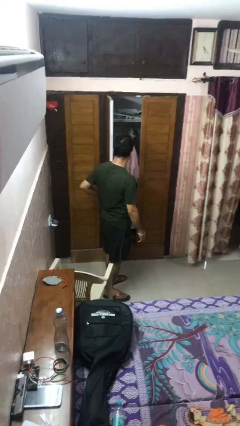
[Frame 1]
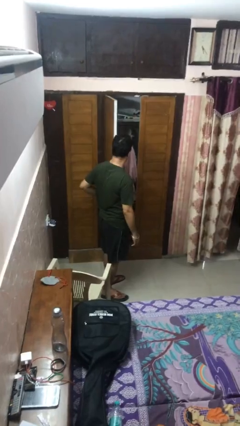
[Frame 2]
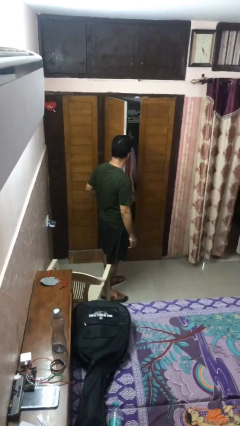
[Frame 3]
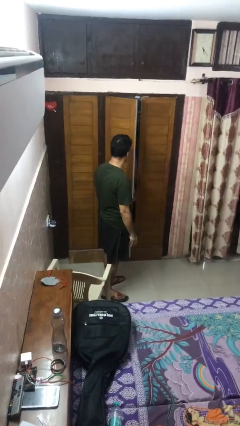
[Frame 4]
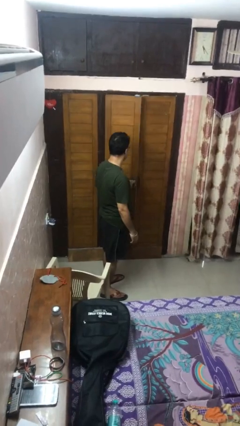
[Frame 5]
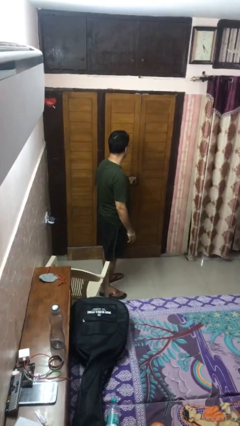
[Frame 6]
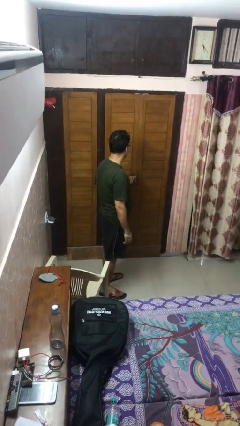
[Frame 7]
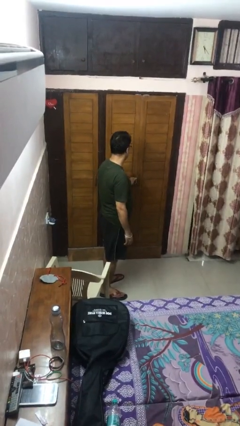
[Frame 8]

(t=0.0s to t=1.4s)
person closes closet door

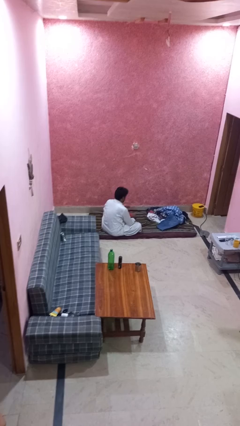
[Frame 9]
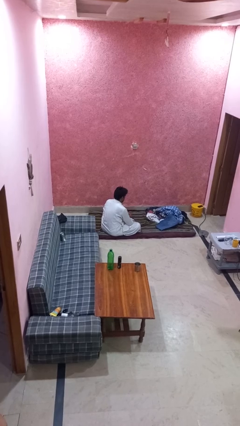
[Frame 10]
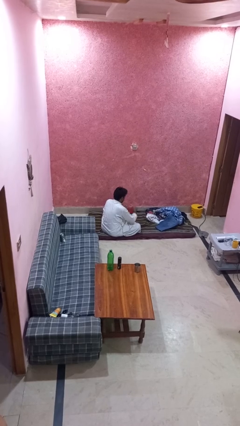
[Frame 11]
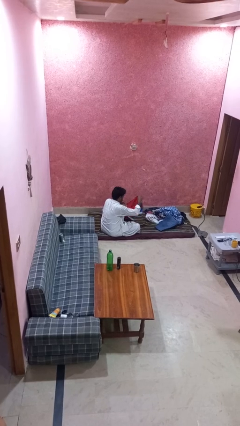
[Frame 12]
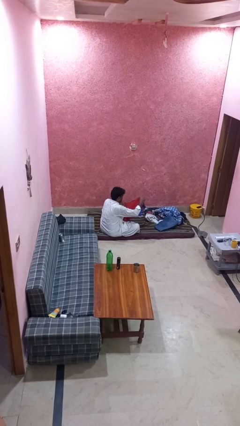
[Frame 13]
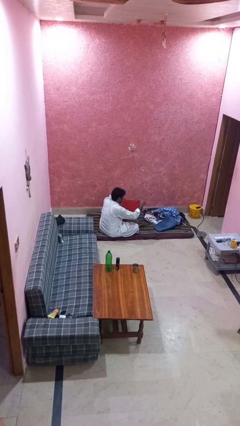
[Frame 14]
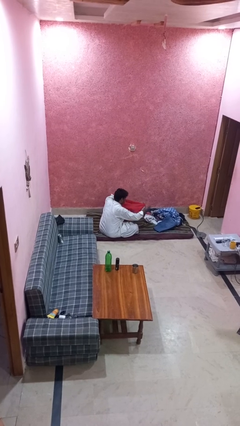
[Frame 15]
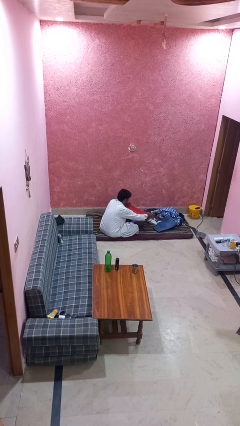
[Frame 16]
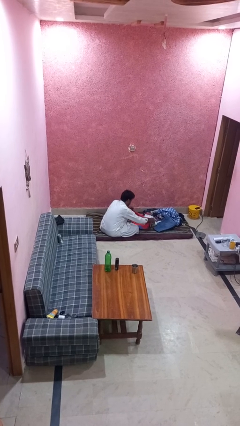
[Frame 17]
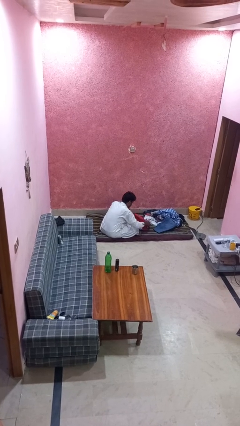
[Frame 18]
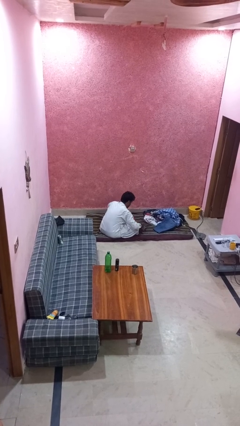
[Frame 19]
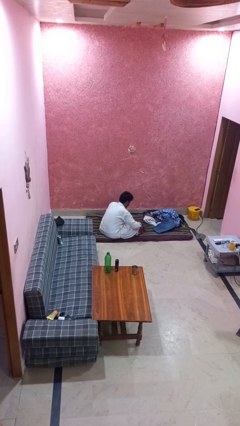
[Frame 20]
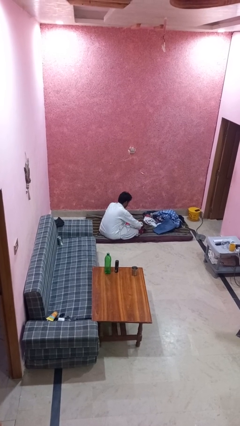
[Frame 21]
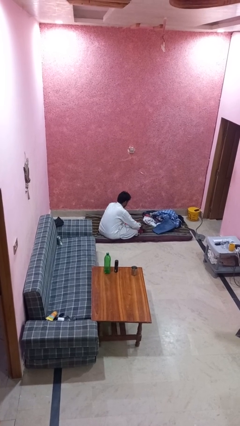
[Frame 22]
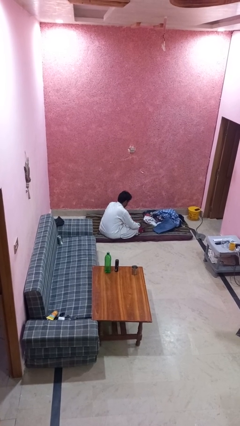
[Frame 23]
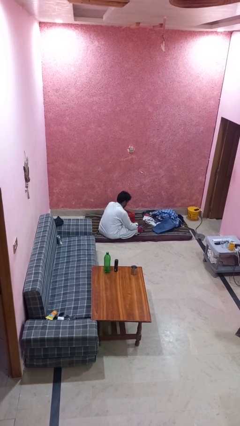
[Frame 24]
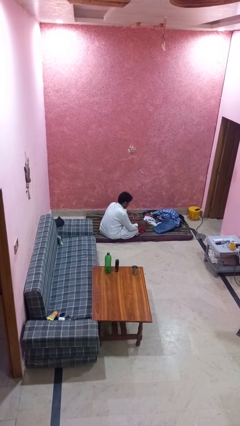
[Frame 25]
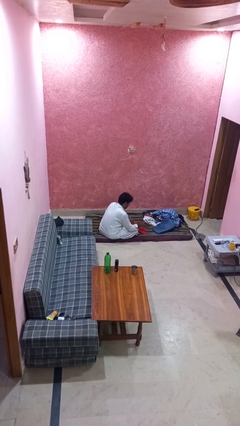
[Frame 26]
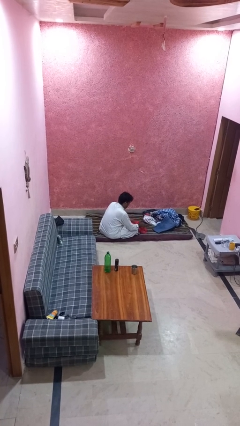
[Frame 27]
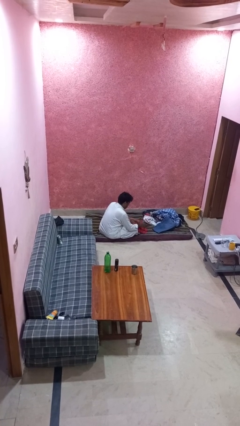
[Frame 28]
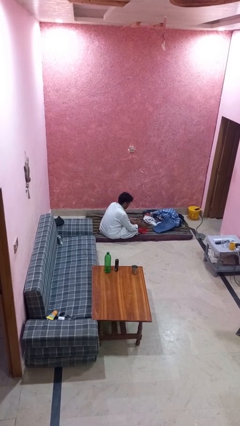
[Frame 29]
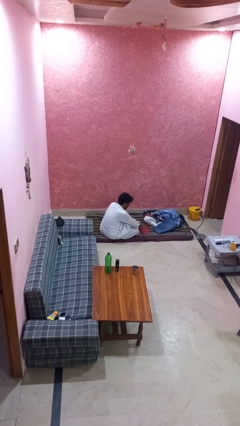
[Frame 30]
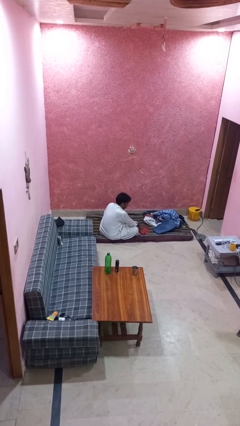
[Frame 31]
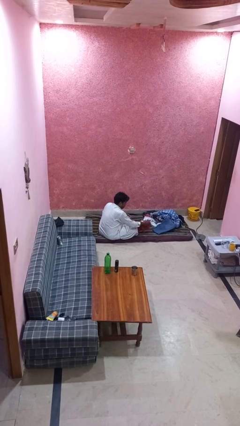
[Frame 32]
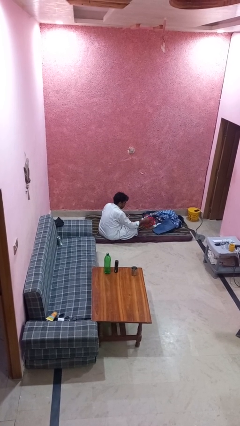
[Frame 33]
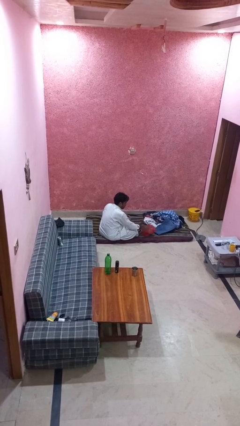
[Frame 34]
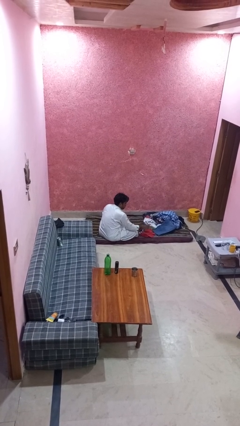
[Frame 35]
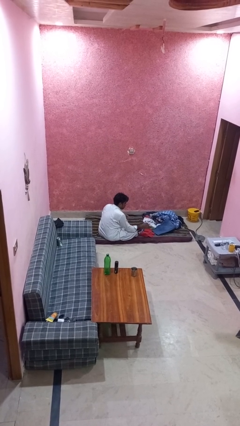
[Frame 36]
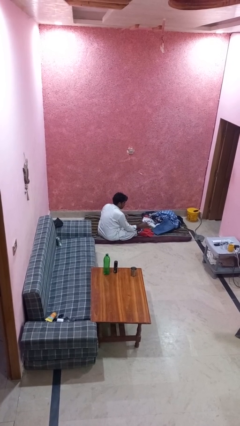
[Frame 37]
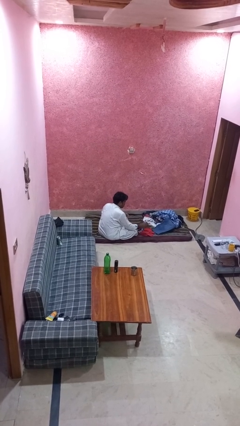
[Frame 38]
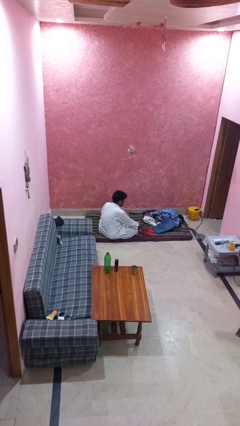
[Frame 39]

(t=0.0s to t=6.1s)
person folds shirt

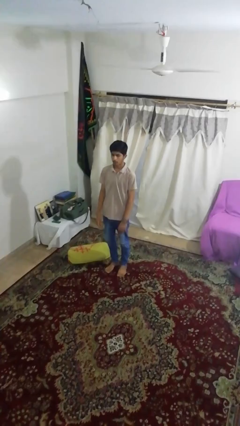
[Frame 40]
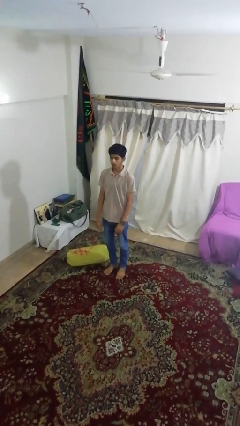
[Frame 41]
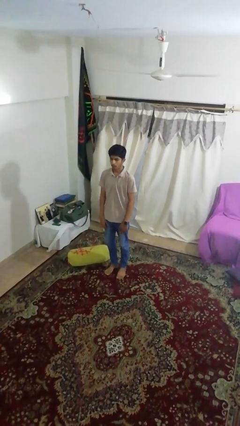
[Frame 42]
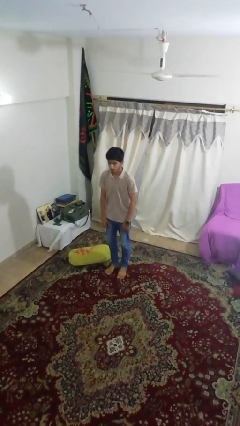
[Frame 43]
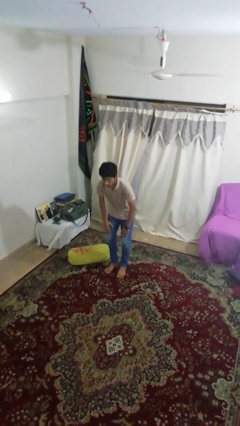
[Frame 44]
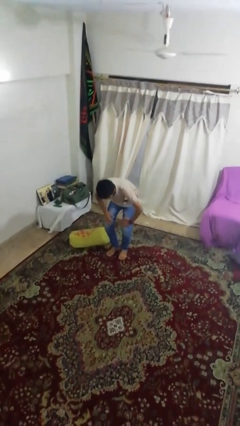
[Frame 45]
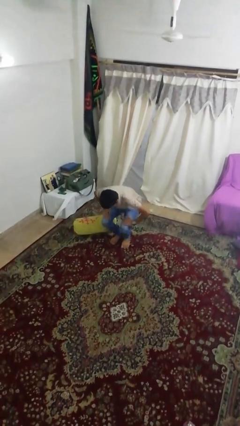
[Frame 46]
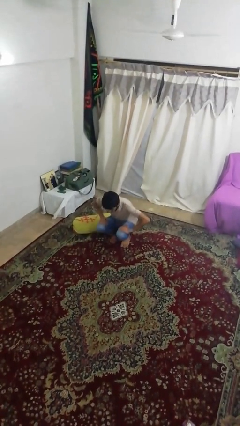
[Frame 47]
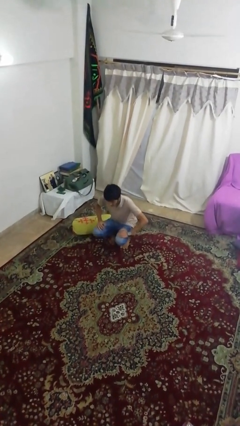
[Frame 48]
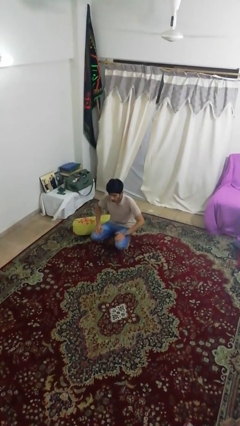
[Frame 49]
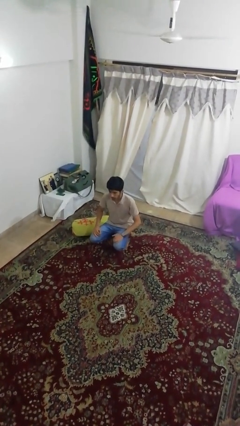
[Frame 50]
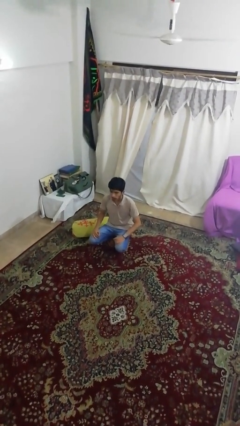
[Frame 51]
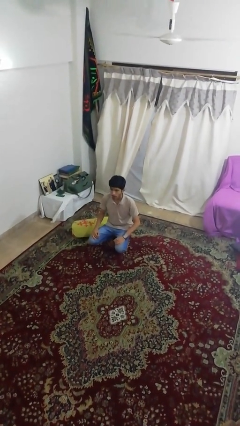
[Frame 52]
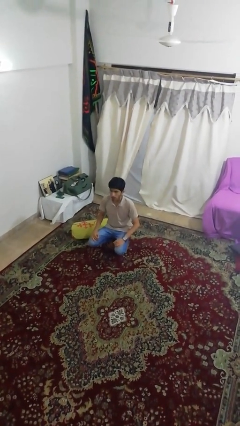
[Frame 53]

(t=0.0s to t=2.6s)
person squats

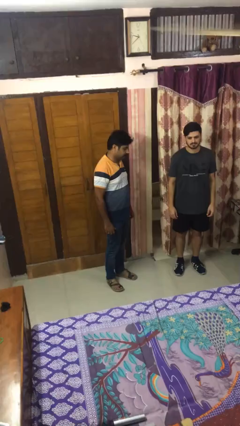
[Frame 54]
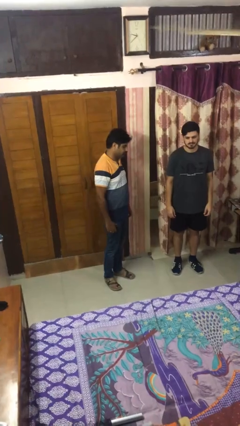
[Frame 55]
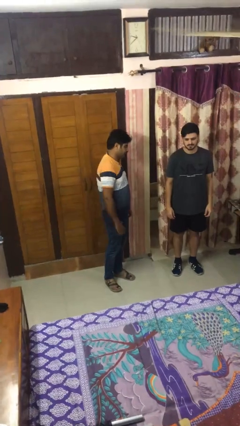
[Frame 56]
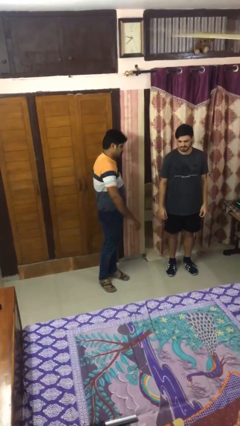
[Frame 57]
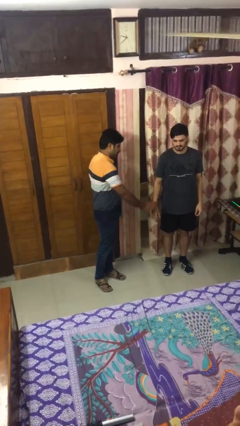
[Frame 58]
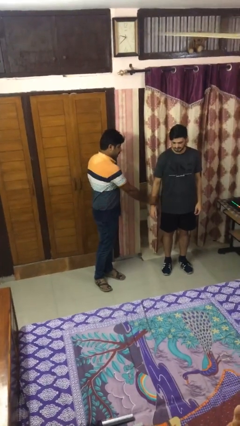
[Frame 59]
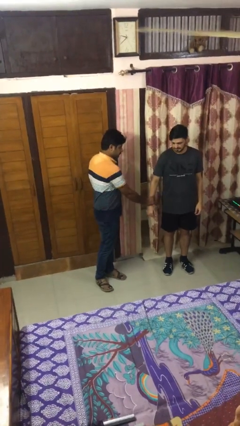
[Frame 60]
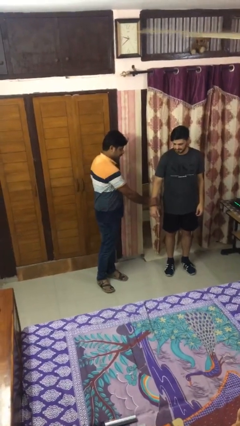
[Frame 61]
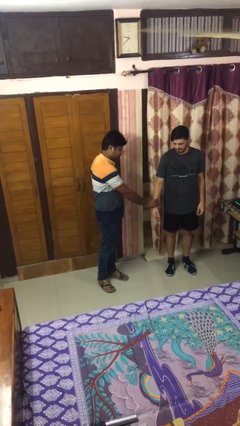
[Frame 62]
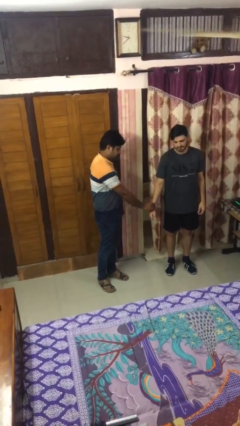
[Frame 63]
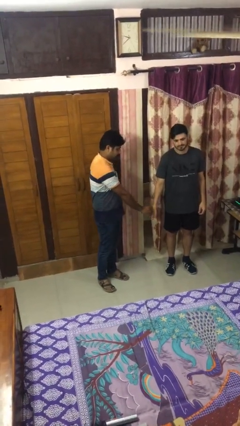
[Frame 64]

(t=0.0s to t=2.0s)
person grabs person by forearm

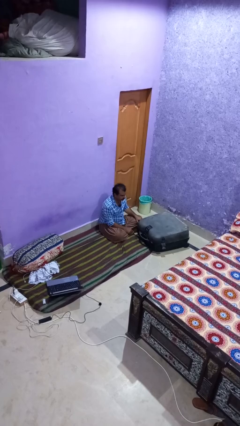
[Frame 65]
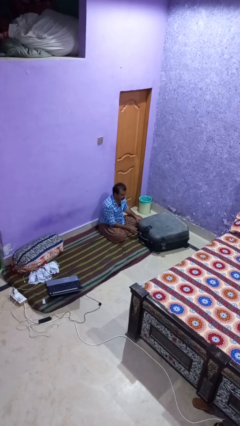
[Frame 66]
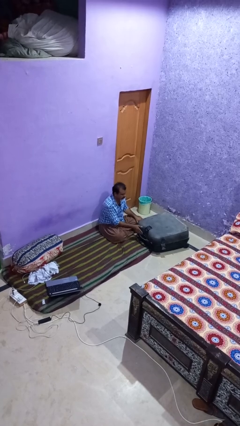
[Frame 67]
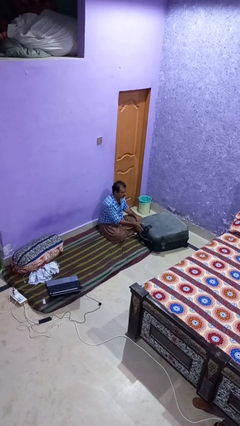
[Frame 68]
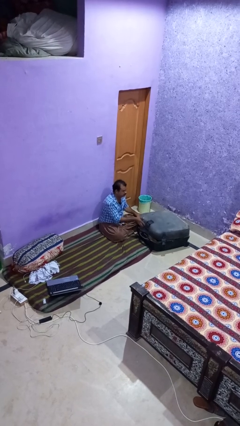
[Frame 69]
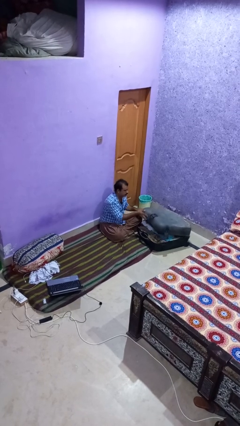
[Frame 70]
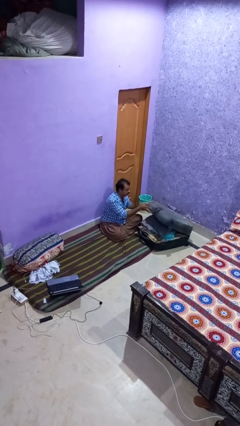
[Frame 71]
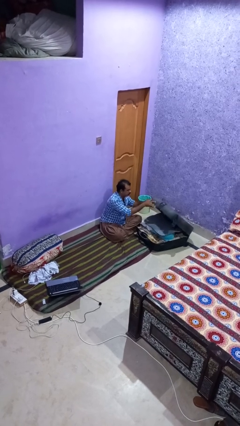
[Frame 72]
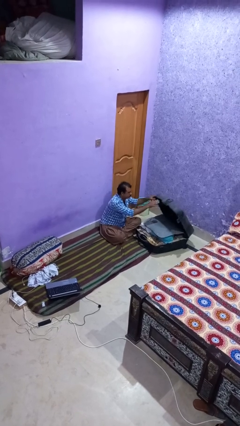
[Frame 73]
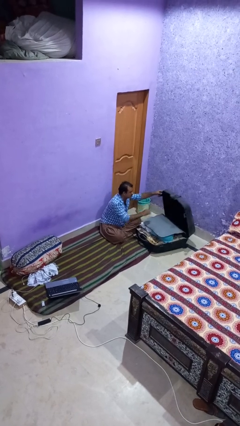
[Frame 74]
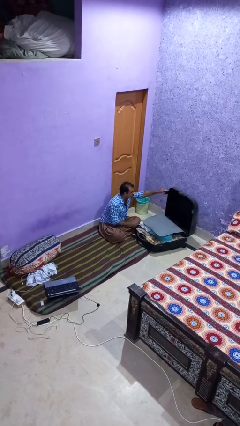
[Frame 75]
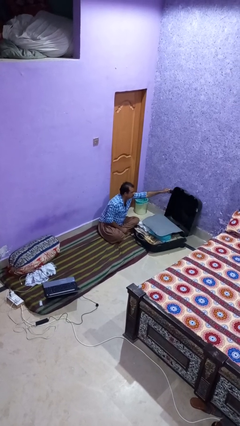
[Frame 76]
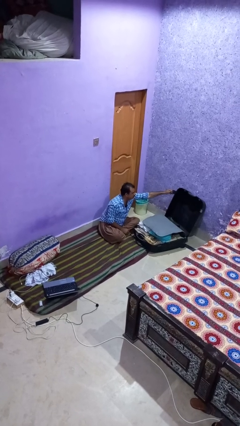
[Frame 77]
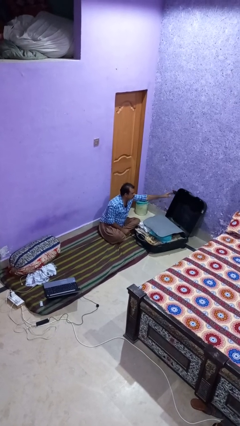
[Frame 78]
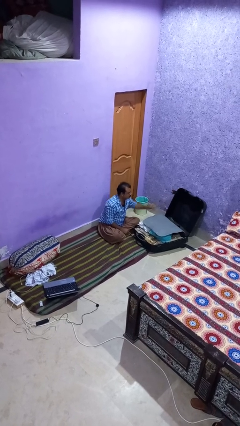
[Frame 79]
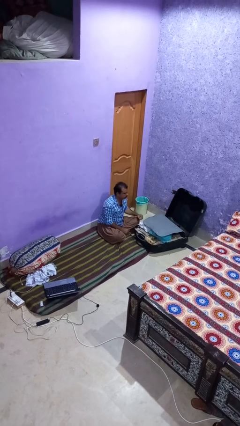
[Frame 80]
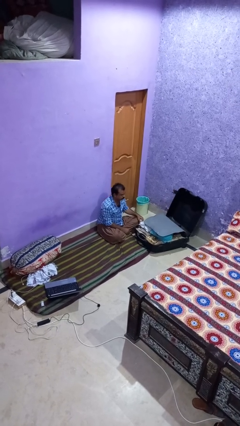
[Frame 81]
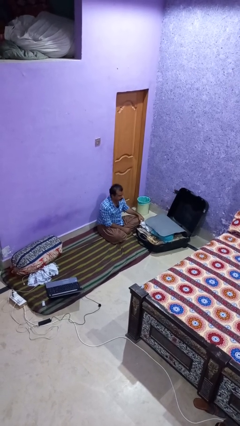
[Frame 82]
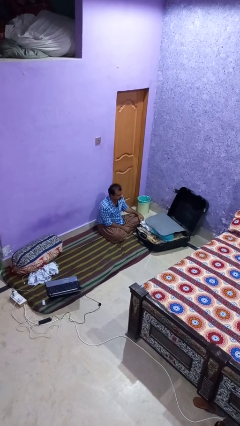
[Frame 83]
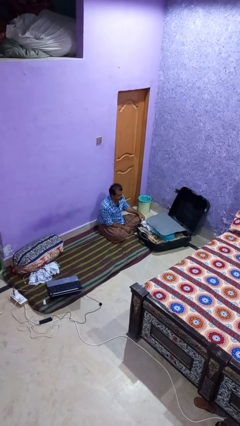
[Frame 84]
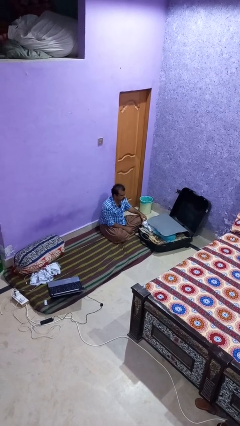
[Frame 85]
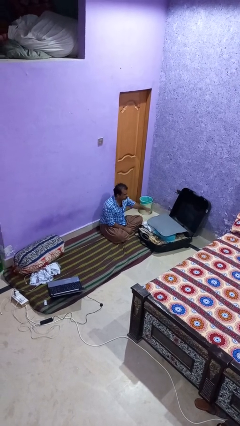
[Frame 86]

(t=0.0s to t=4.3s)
person opens suitcase

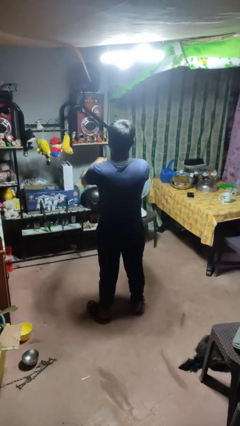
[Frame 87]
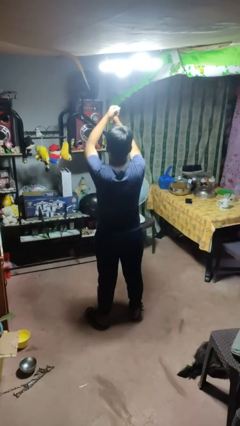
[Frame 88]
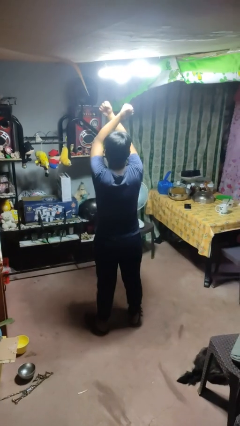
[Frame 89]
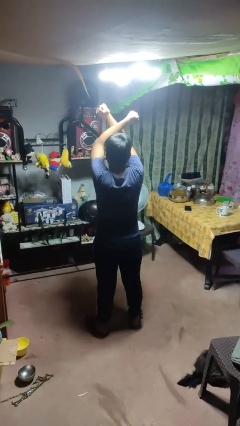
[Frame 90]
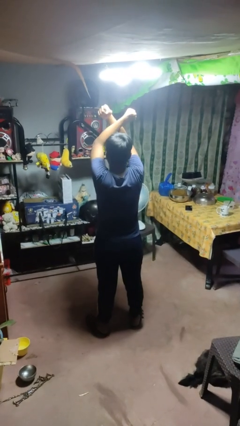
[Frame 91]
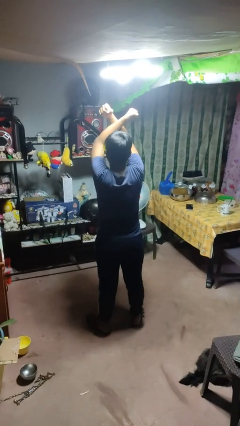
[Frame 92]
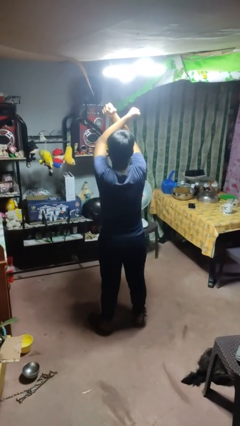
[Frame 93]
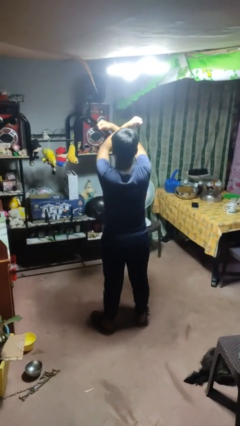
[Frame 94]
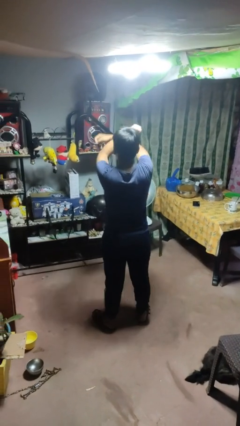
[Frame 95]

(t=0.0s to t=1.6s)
person gestures arms x
